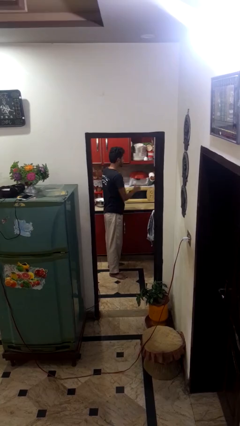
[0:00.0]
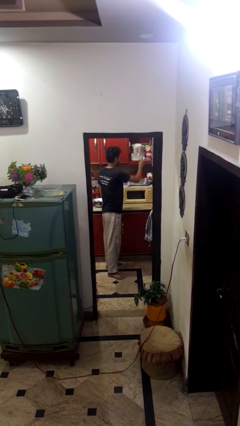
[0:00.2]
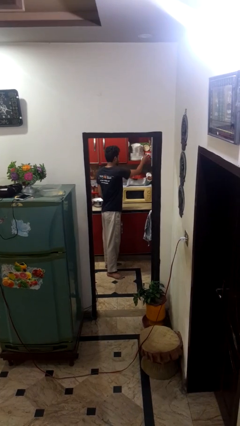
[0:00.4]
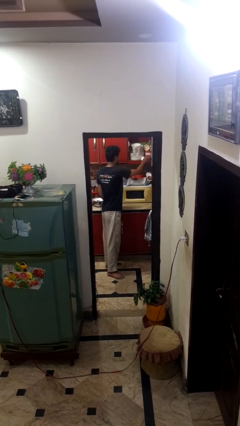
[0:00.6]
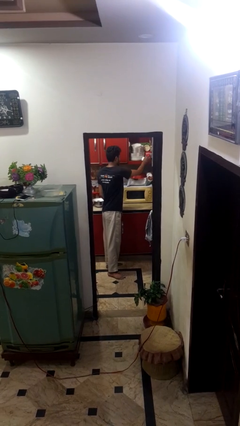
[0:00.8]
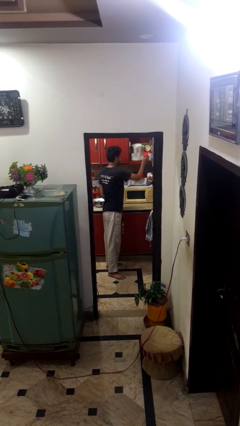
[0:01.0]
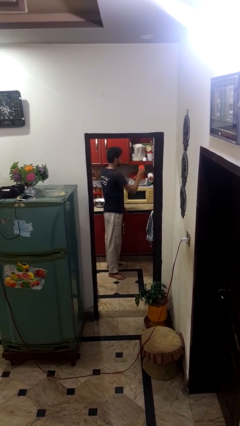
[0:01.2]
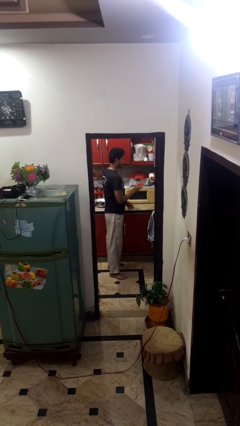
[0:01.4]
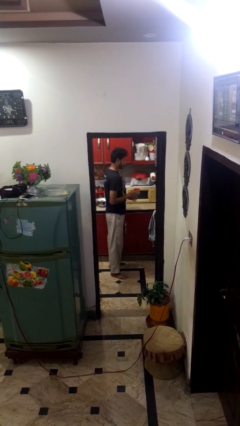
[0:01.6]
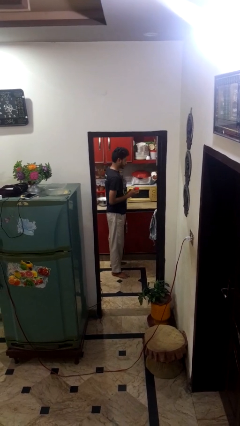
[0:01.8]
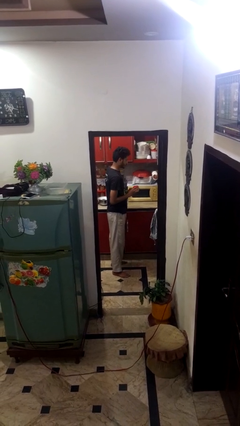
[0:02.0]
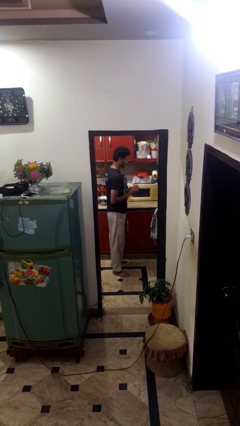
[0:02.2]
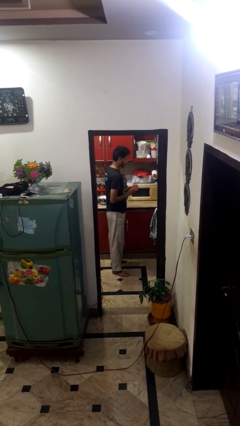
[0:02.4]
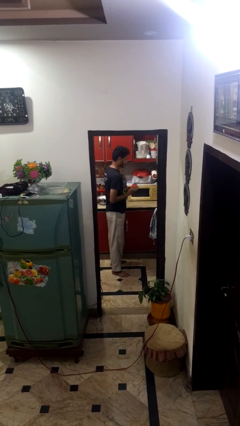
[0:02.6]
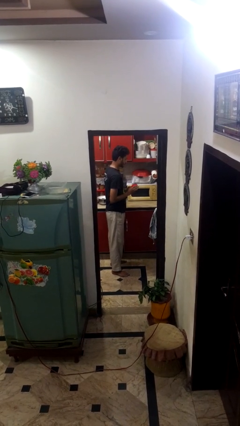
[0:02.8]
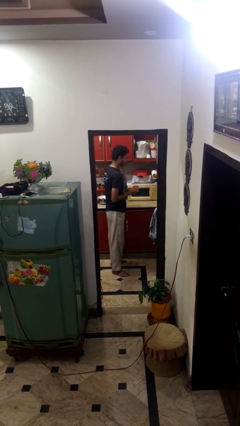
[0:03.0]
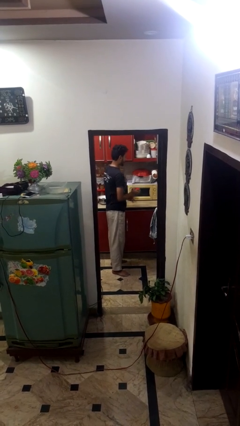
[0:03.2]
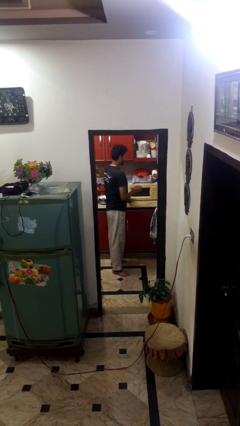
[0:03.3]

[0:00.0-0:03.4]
person picks up object from cabinet

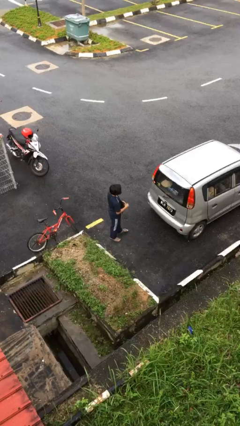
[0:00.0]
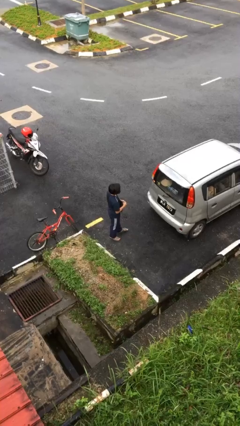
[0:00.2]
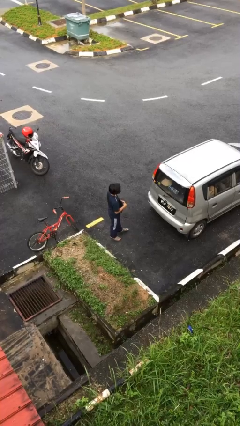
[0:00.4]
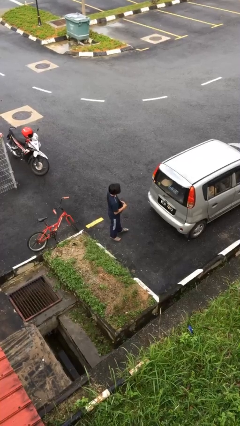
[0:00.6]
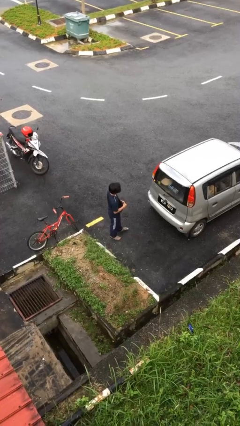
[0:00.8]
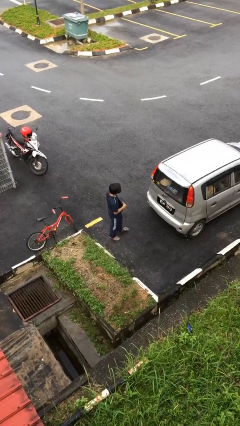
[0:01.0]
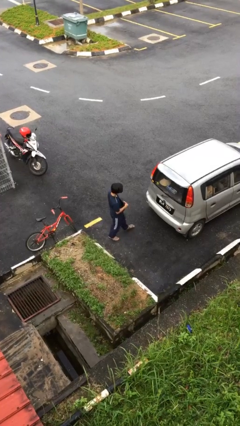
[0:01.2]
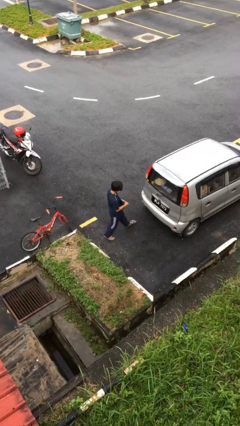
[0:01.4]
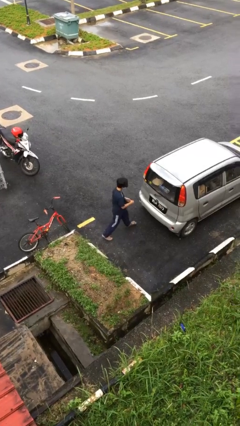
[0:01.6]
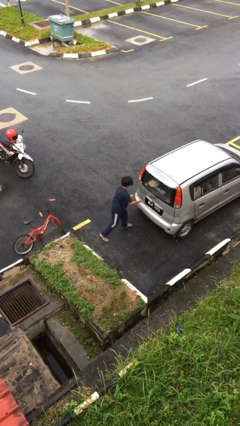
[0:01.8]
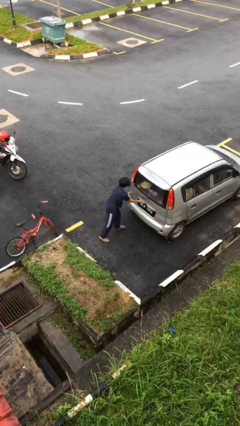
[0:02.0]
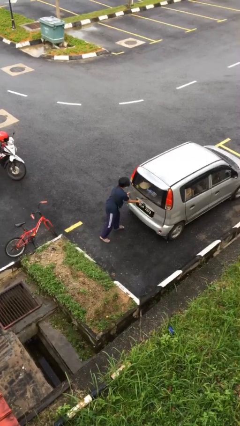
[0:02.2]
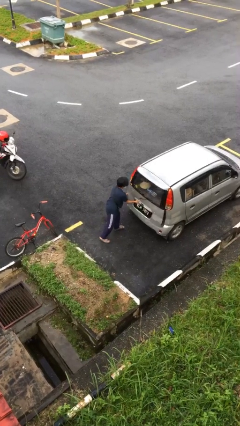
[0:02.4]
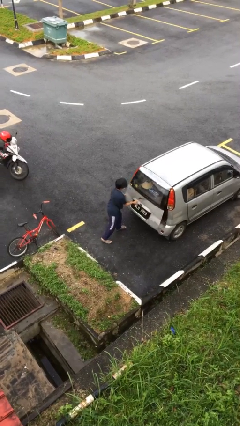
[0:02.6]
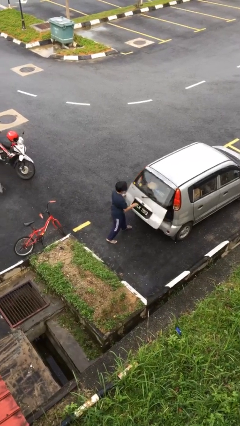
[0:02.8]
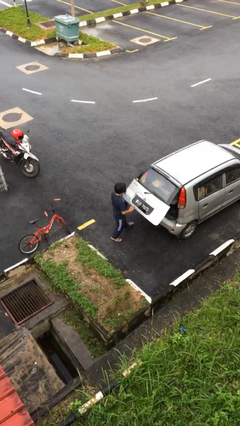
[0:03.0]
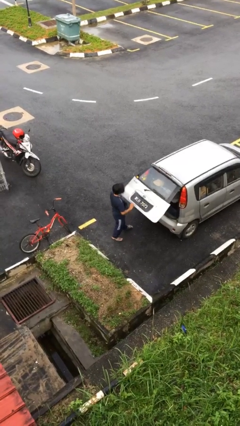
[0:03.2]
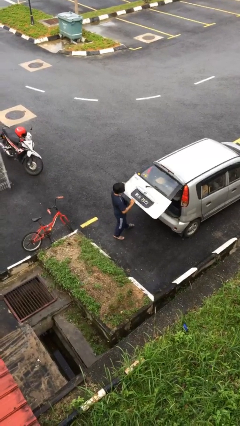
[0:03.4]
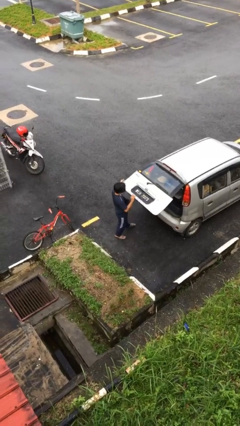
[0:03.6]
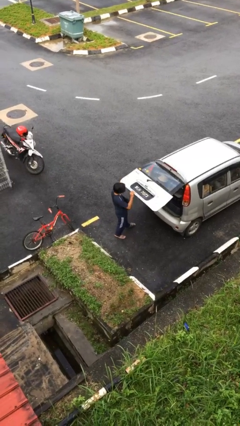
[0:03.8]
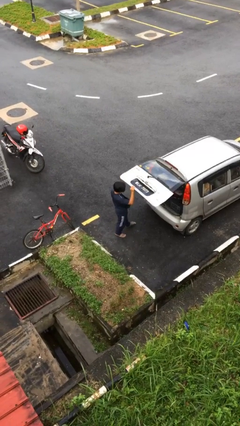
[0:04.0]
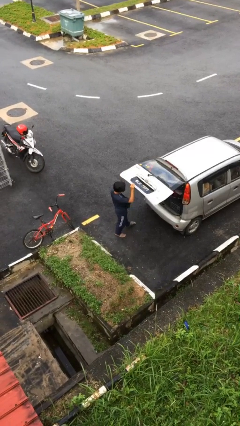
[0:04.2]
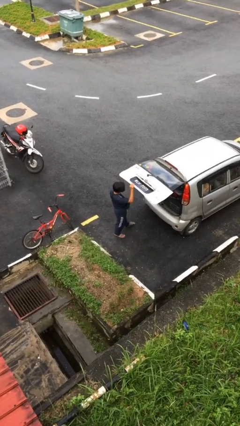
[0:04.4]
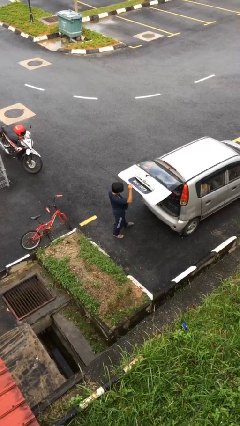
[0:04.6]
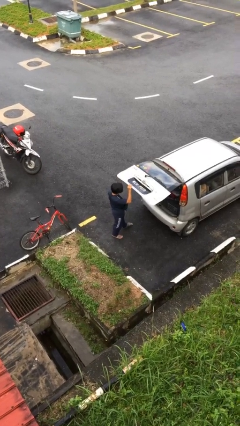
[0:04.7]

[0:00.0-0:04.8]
person opens car trunk

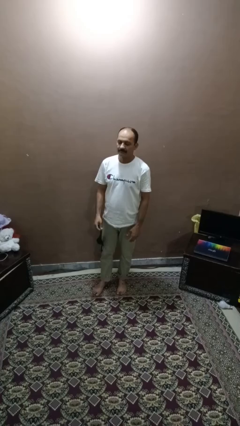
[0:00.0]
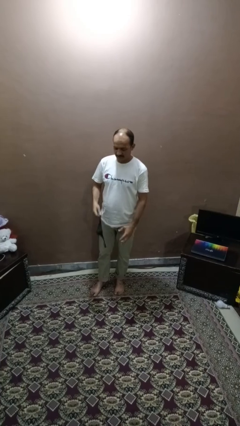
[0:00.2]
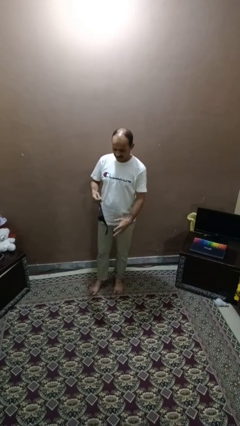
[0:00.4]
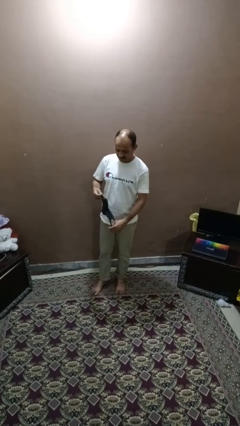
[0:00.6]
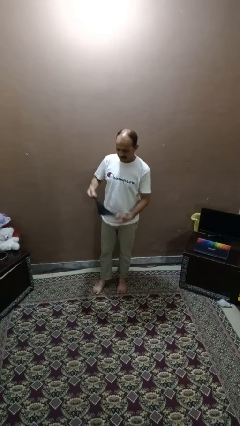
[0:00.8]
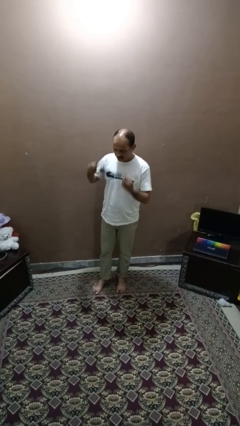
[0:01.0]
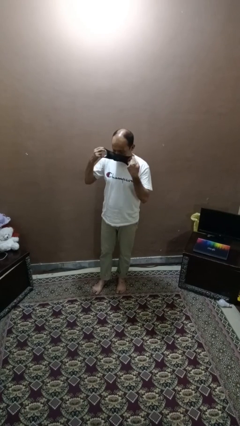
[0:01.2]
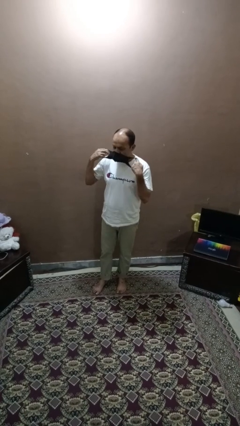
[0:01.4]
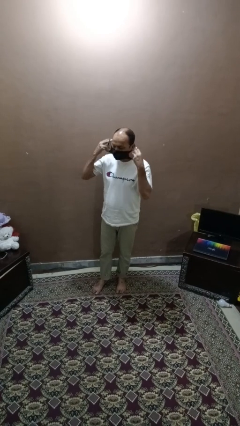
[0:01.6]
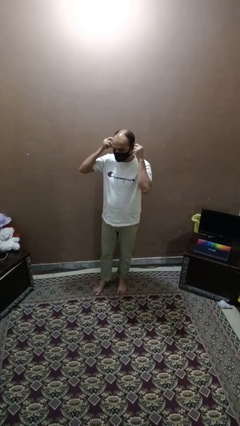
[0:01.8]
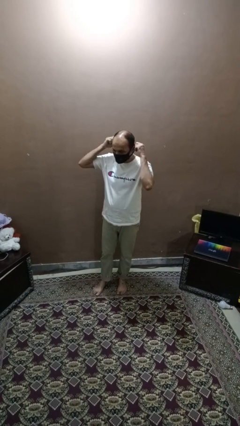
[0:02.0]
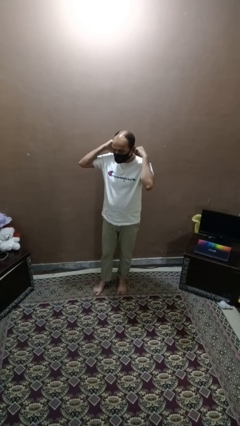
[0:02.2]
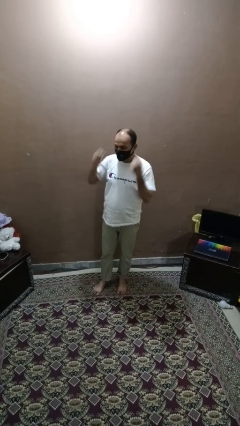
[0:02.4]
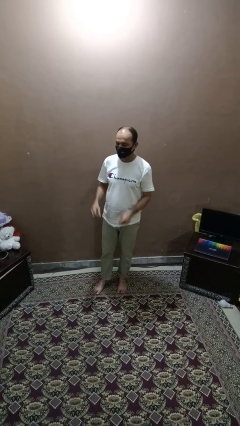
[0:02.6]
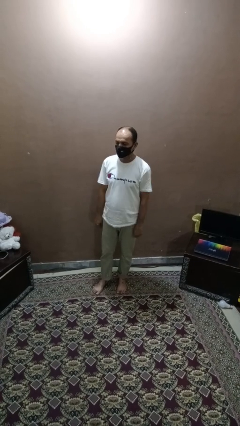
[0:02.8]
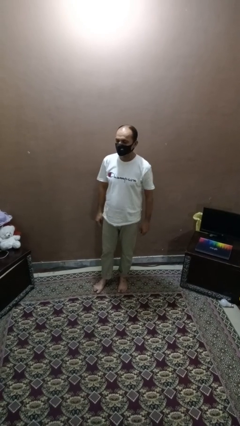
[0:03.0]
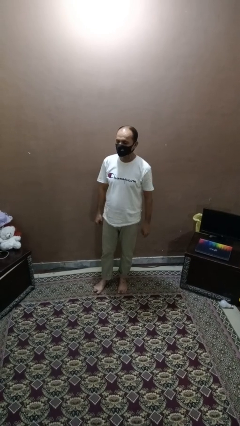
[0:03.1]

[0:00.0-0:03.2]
person puts on facemask

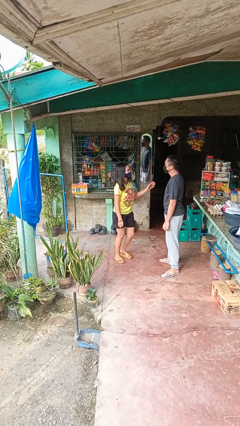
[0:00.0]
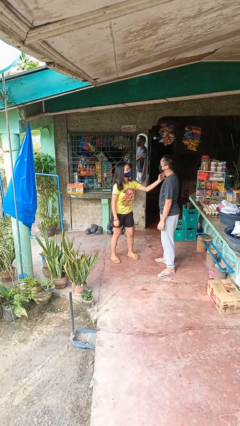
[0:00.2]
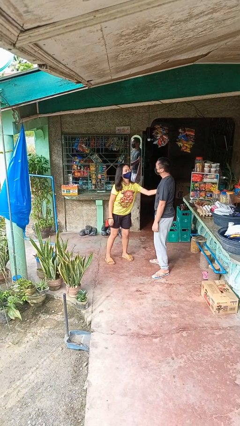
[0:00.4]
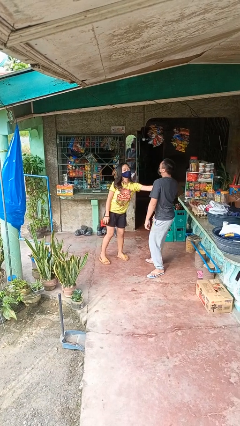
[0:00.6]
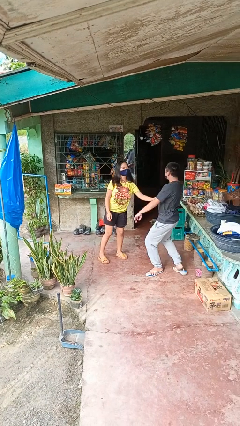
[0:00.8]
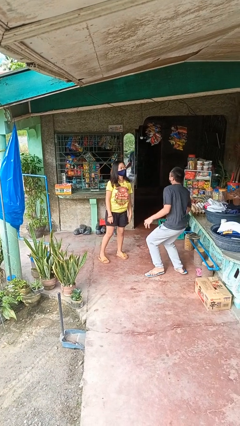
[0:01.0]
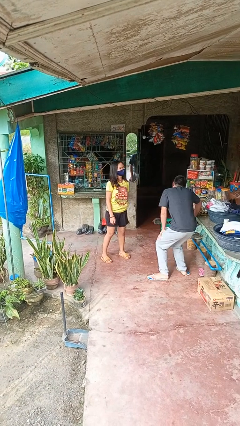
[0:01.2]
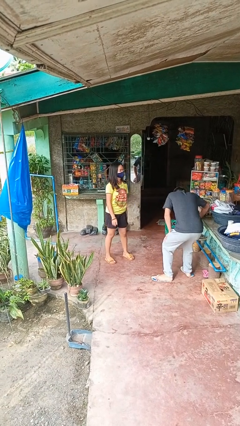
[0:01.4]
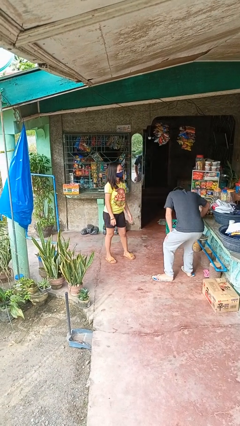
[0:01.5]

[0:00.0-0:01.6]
person shoves person

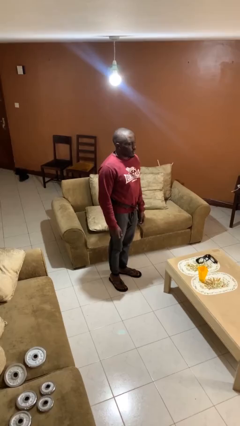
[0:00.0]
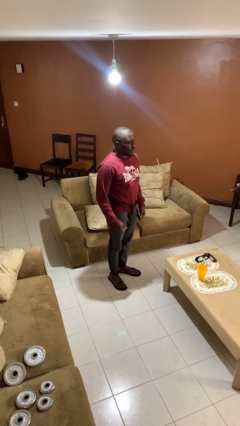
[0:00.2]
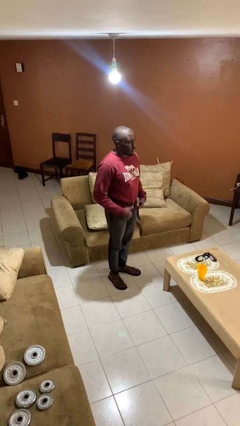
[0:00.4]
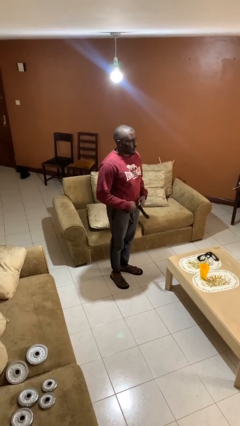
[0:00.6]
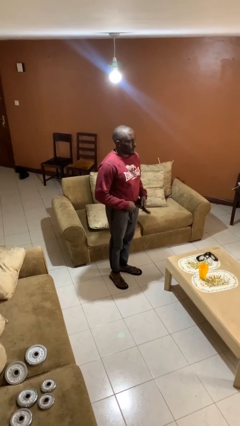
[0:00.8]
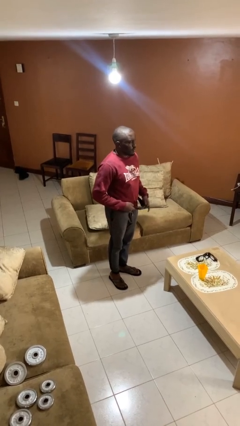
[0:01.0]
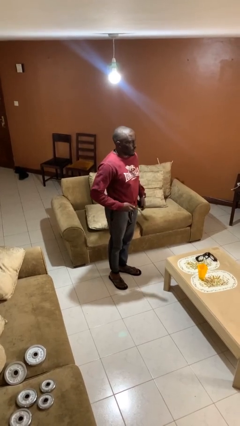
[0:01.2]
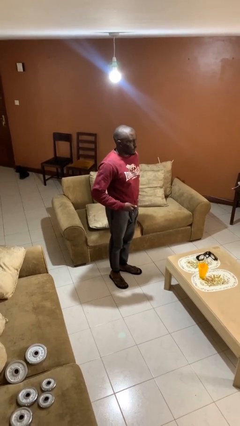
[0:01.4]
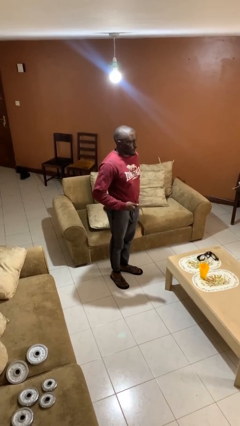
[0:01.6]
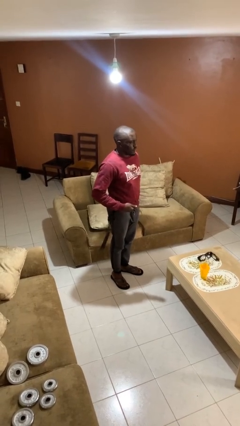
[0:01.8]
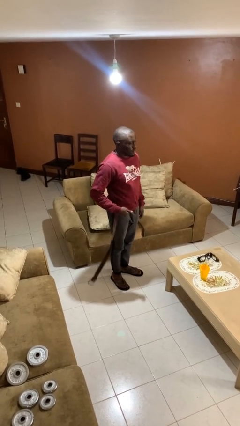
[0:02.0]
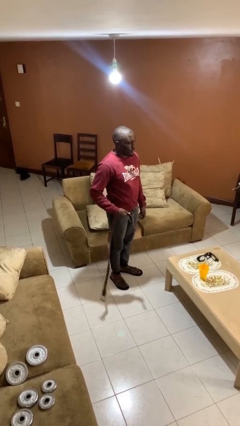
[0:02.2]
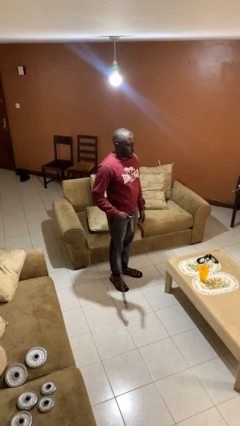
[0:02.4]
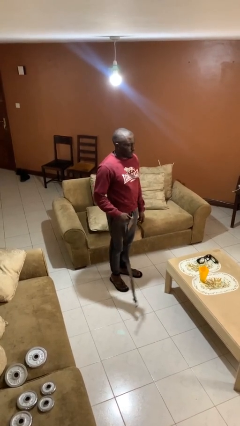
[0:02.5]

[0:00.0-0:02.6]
person takes off belt

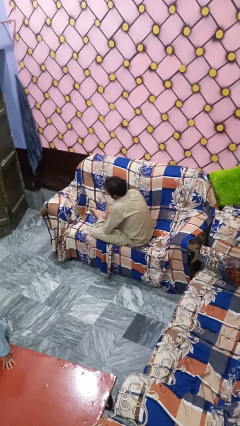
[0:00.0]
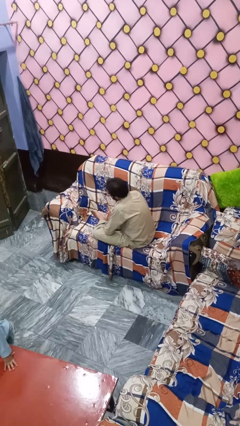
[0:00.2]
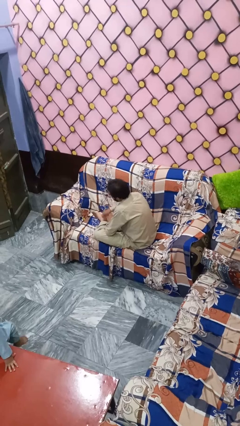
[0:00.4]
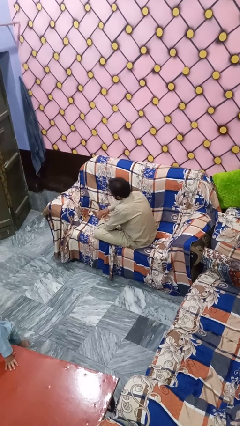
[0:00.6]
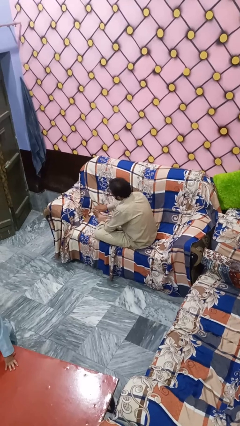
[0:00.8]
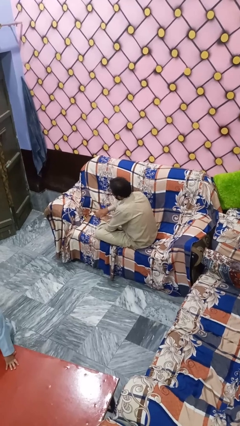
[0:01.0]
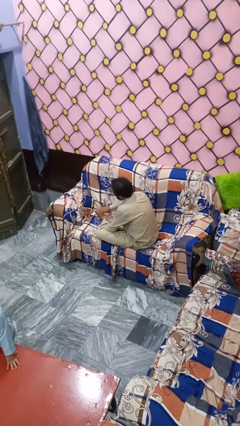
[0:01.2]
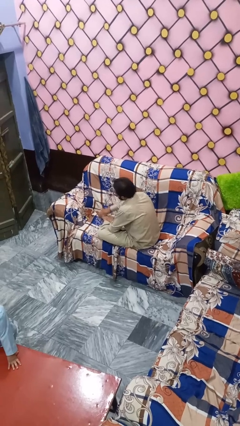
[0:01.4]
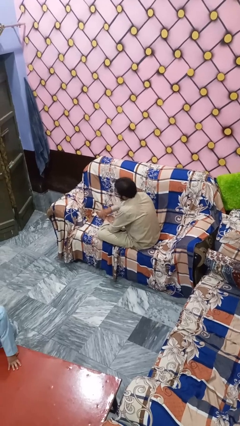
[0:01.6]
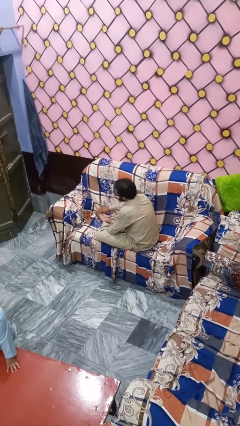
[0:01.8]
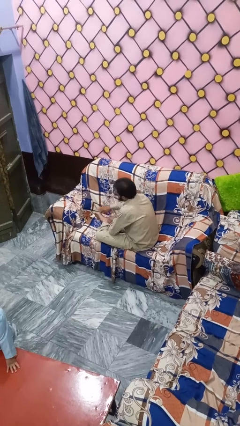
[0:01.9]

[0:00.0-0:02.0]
person rubs foot
